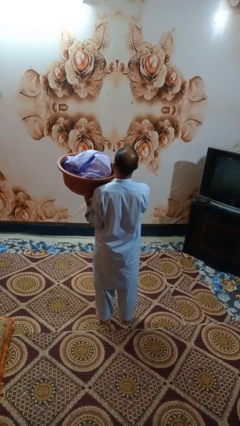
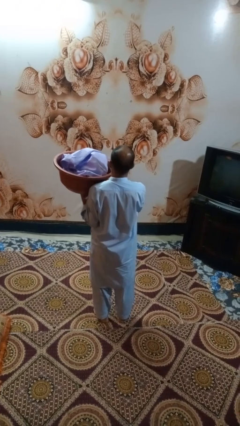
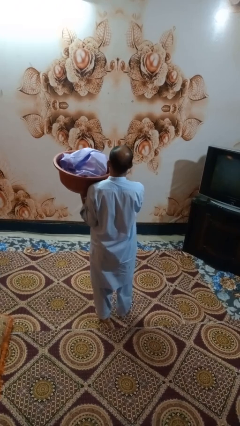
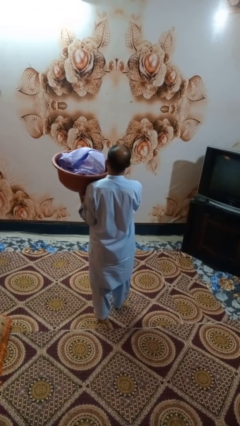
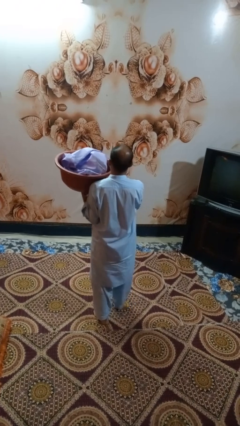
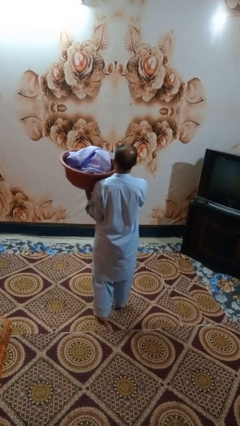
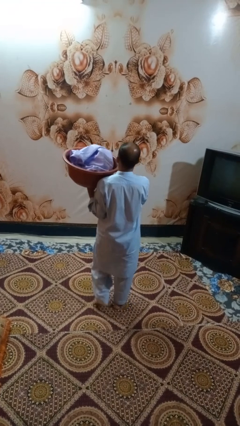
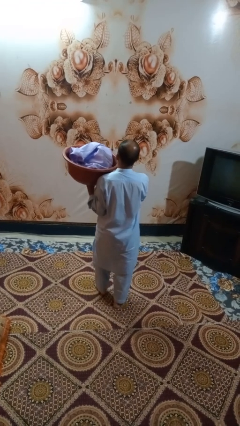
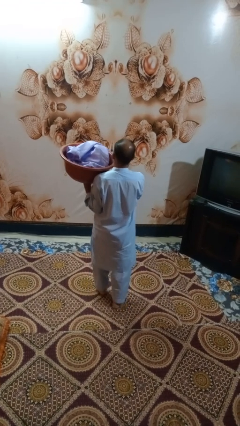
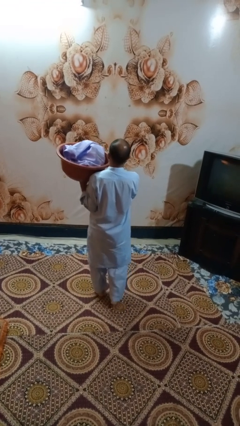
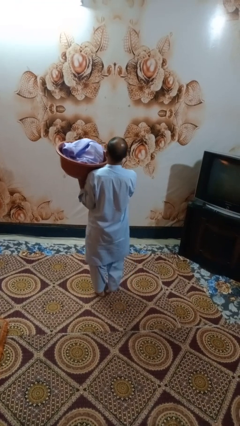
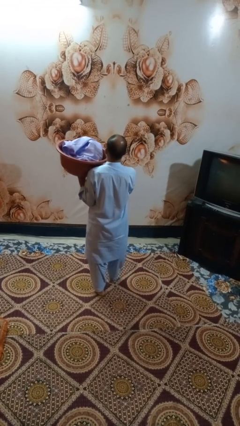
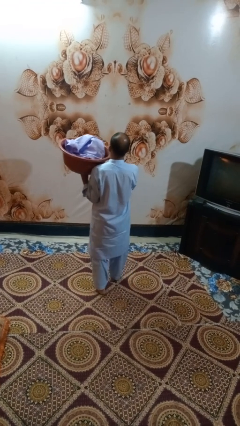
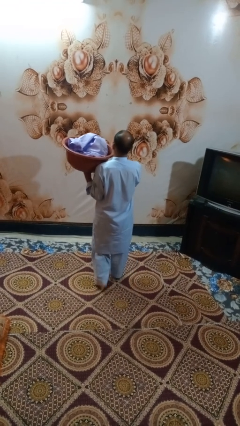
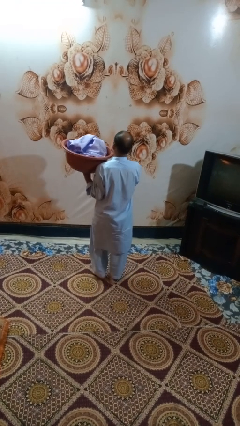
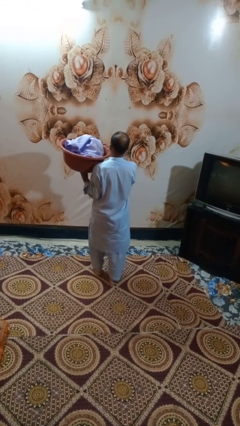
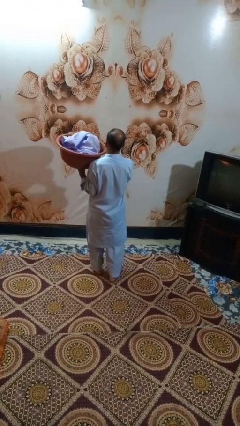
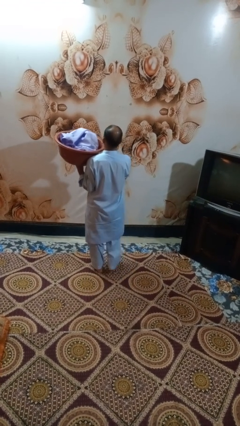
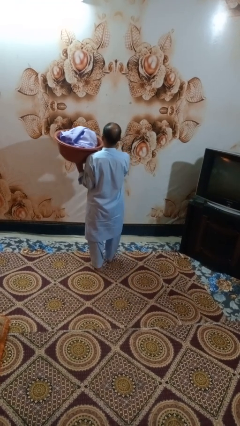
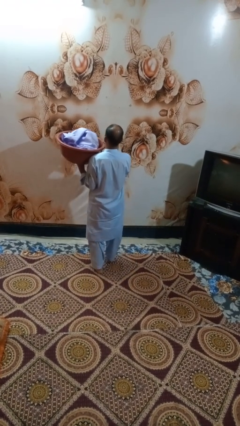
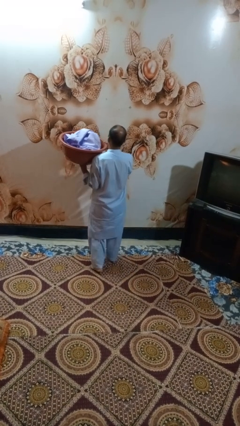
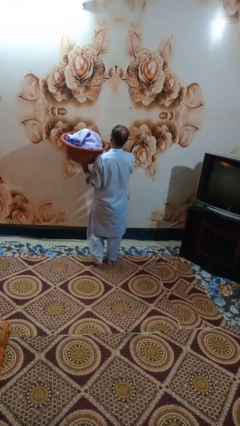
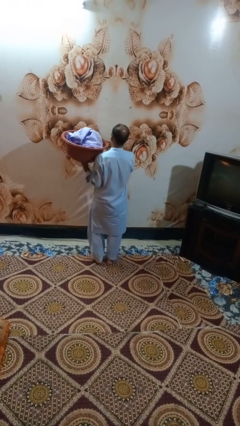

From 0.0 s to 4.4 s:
person carries laundry basket

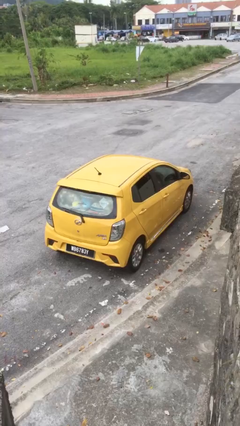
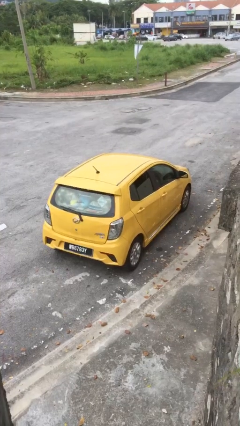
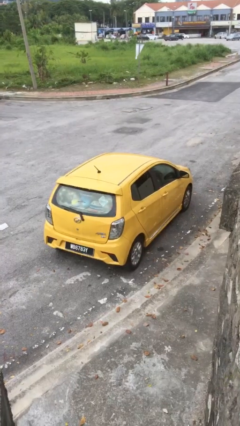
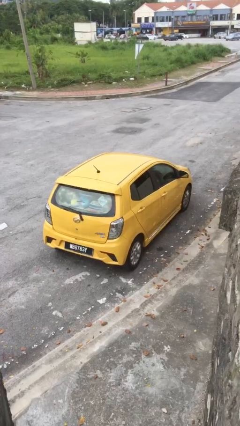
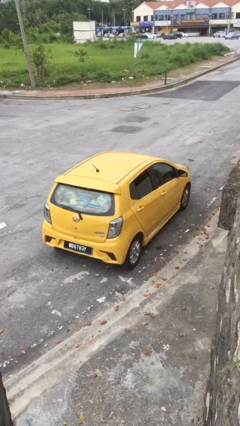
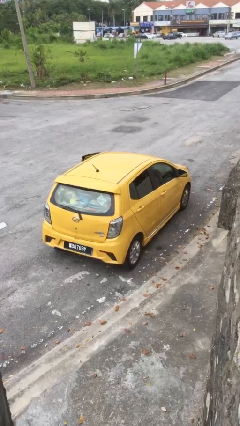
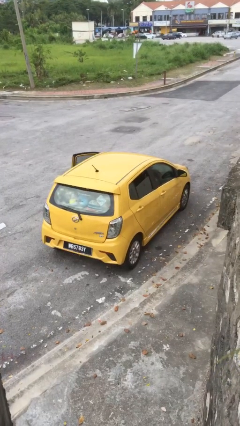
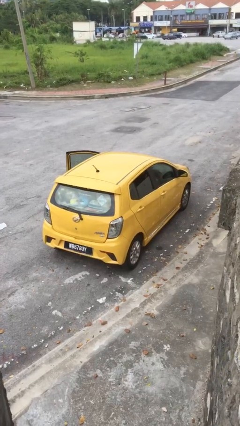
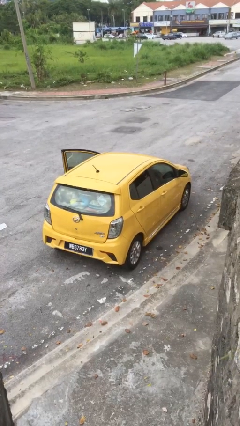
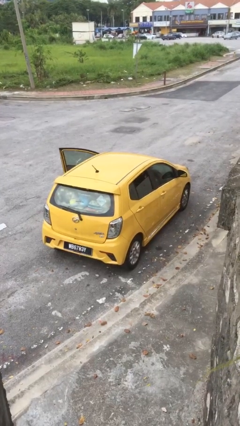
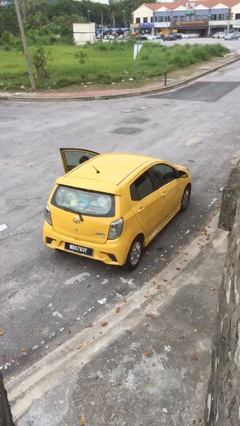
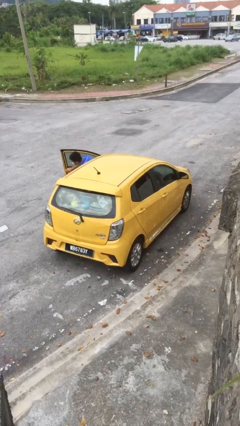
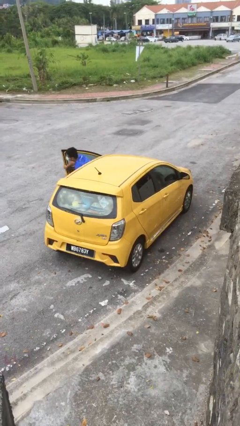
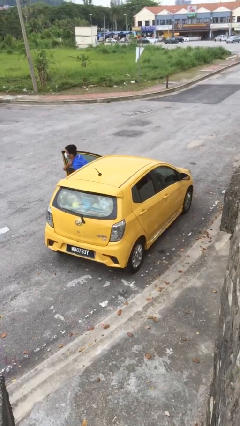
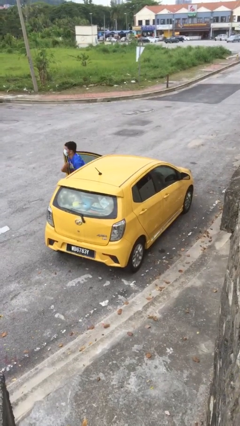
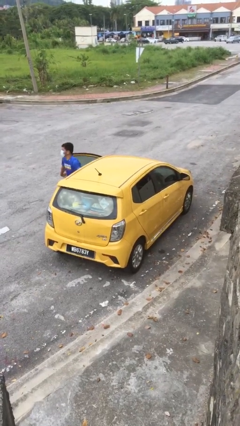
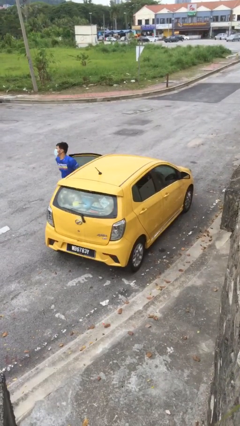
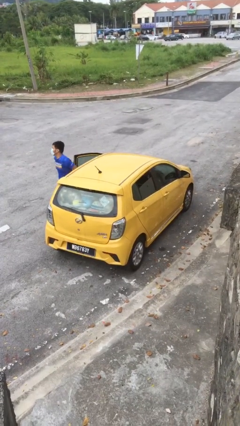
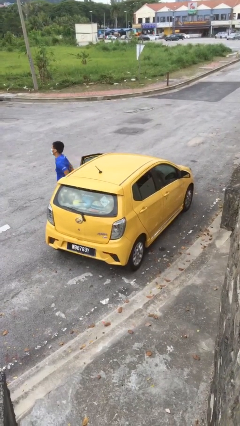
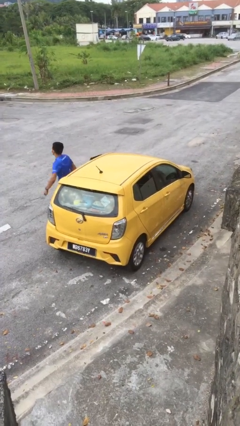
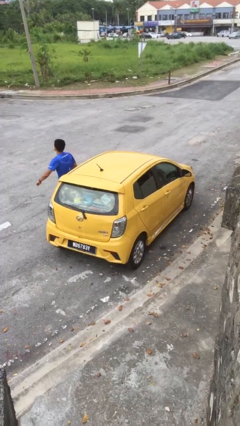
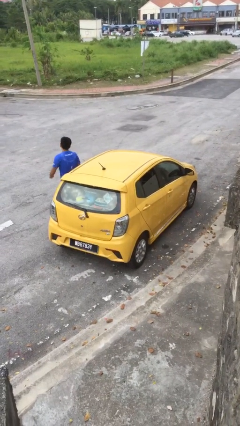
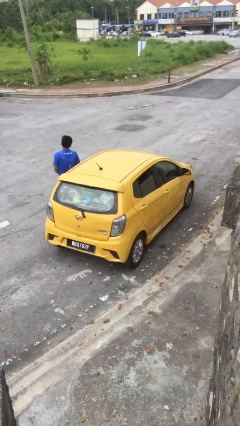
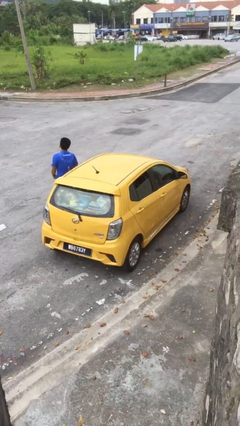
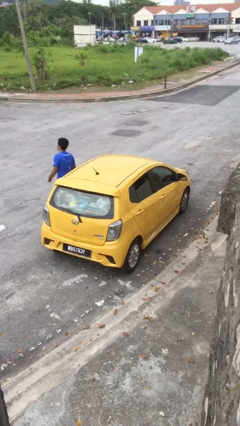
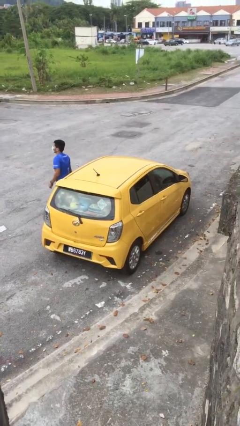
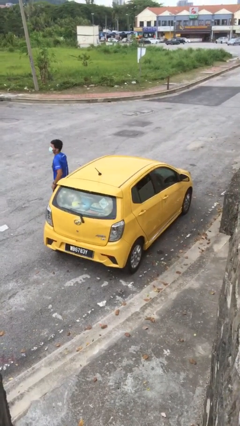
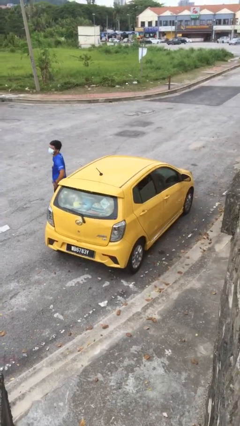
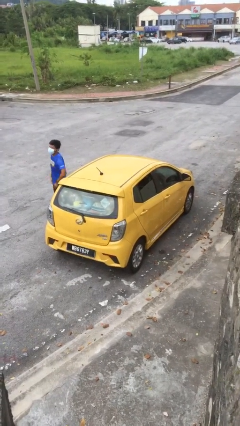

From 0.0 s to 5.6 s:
car drops off person

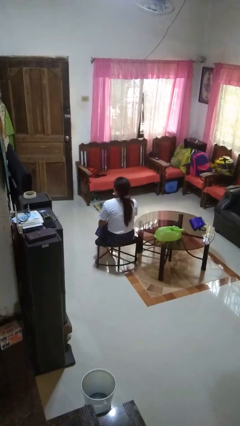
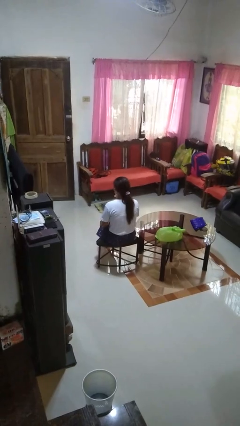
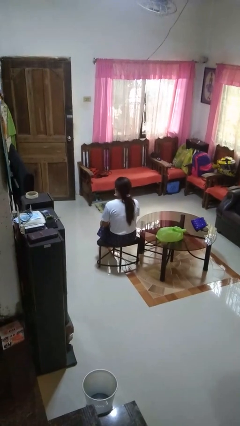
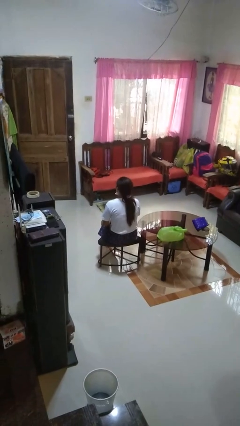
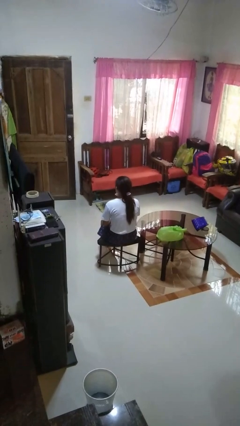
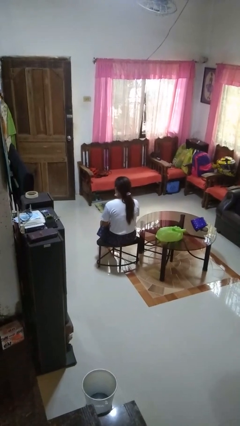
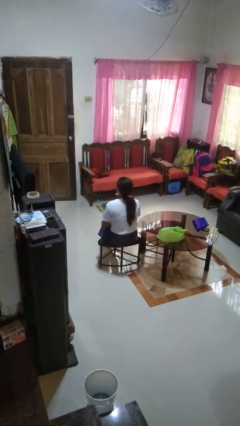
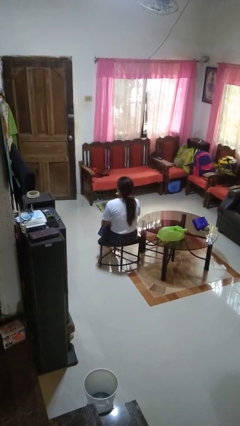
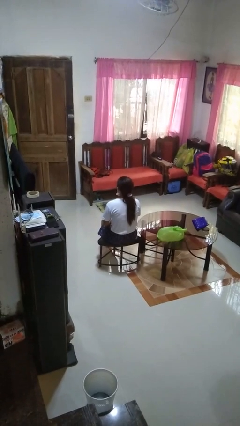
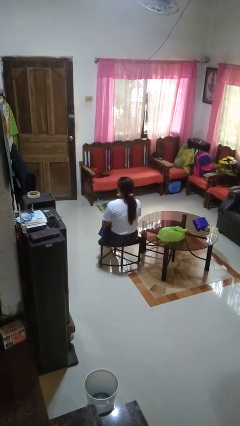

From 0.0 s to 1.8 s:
person nods head

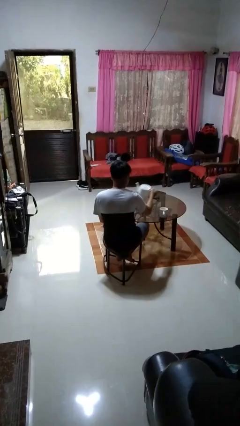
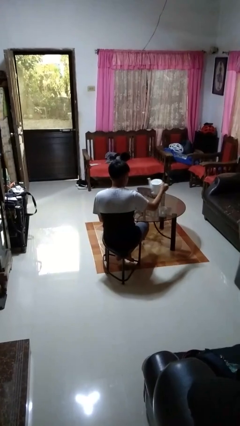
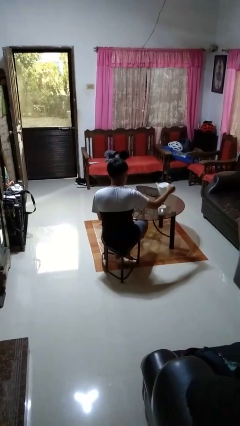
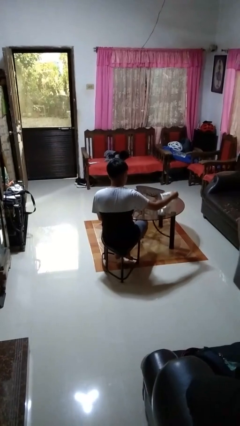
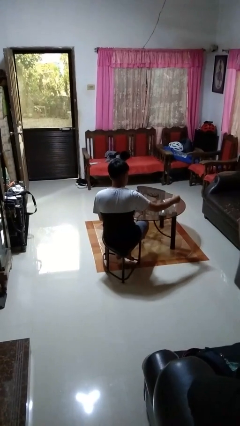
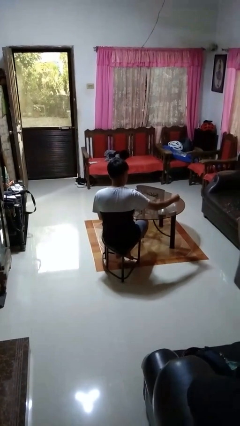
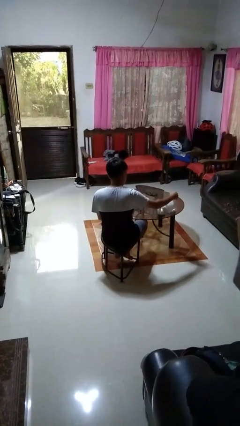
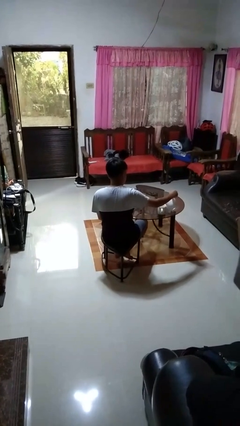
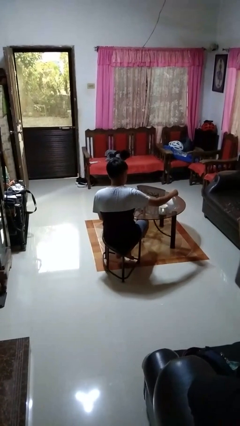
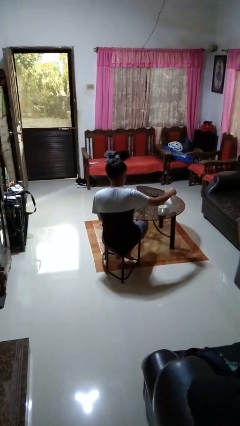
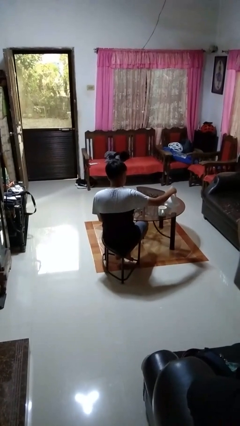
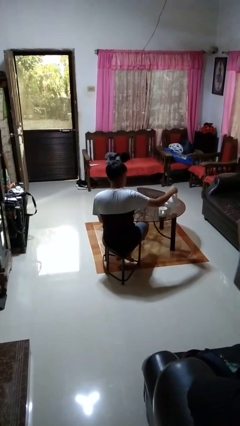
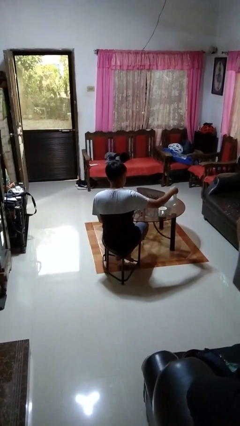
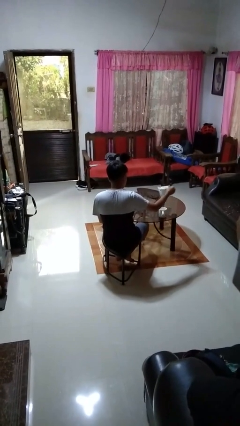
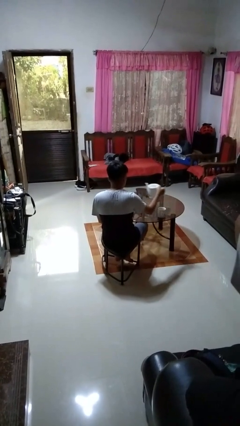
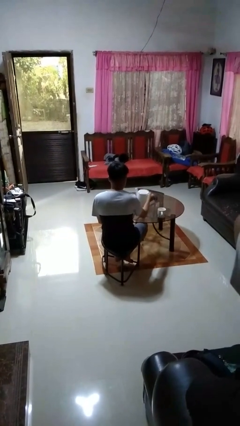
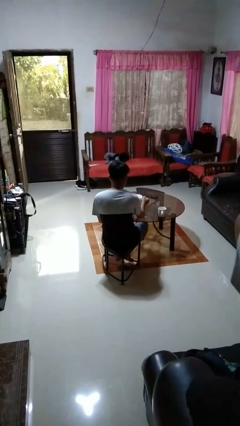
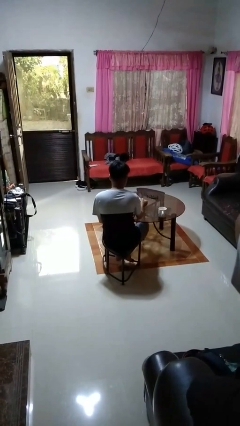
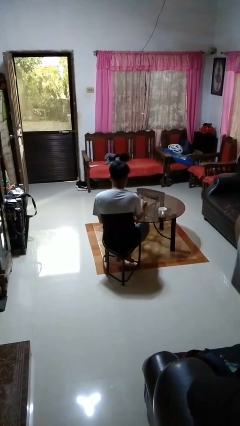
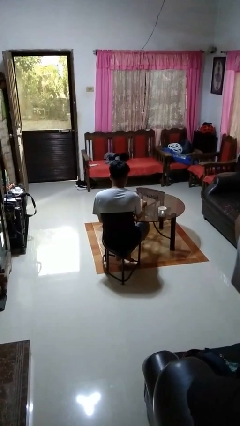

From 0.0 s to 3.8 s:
person pours coffee into mug

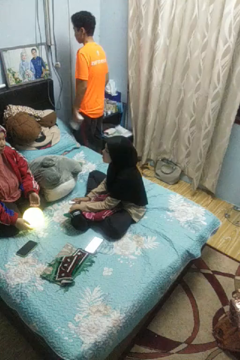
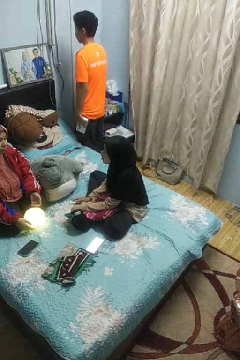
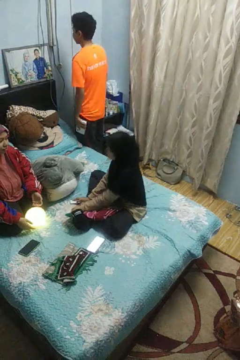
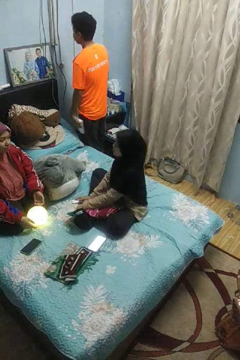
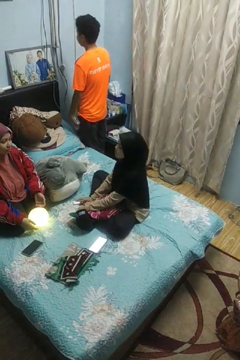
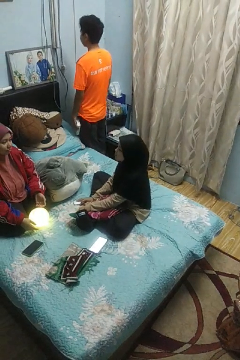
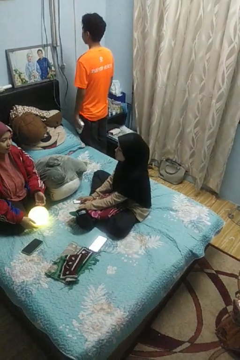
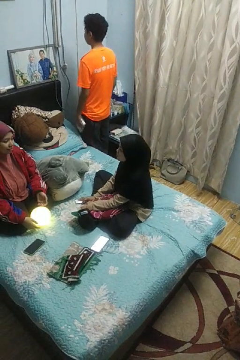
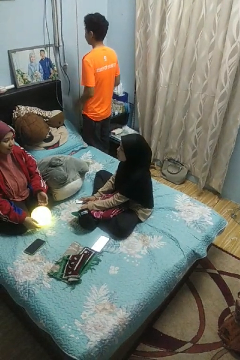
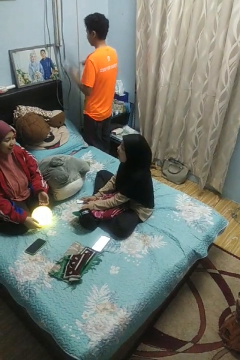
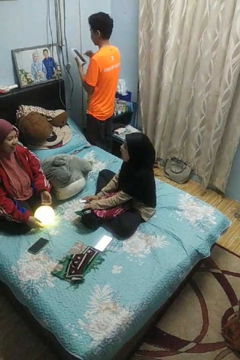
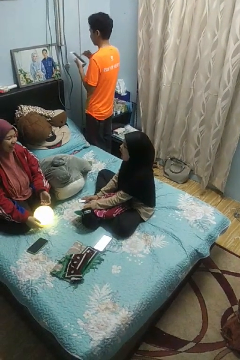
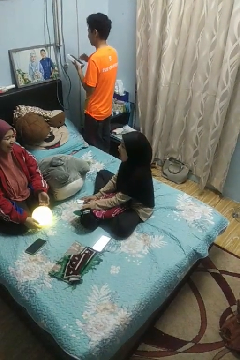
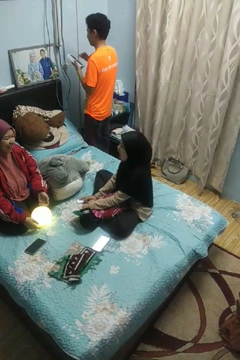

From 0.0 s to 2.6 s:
person laughs with person
